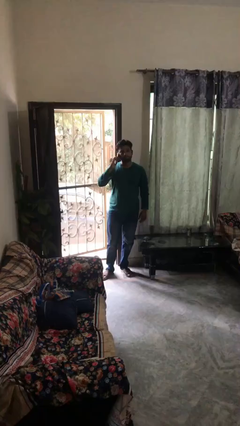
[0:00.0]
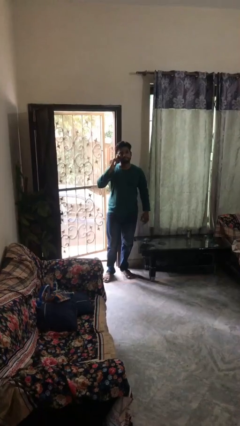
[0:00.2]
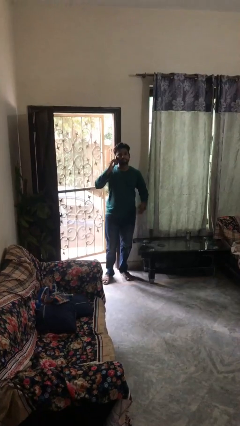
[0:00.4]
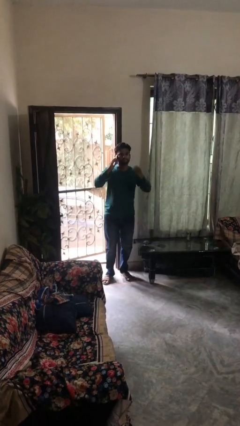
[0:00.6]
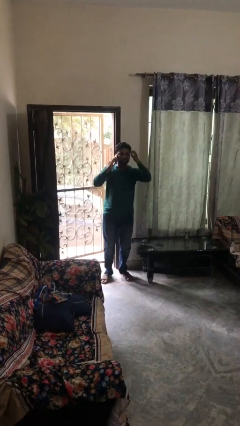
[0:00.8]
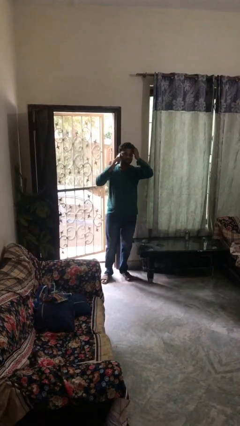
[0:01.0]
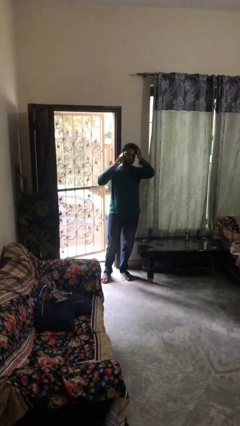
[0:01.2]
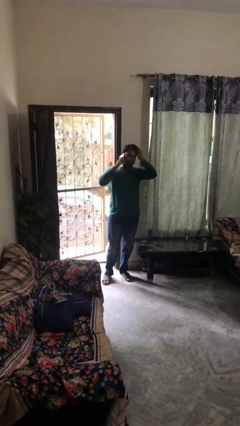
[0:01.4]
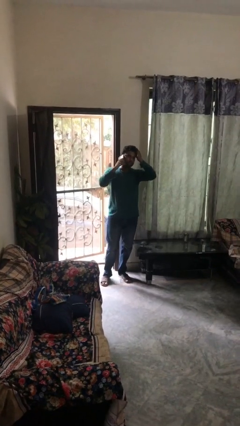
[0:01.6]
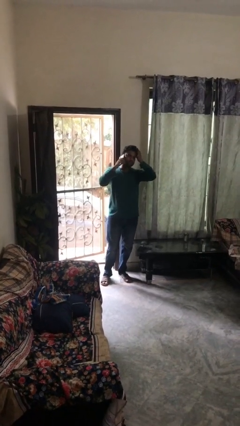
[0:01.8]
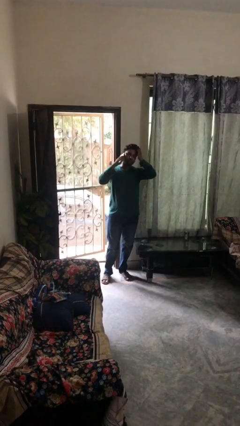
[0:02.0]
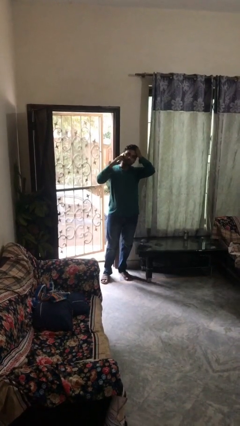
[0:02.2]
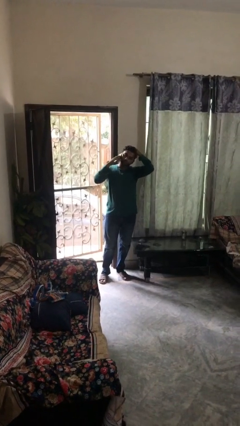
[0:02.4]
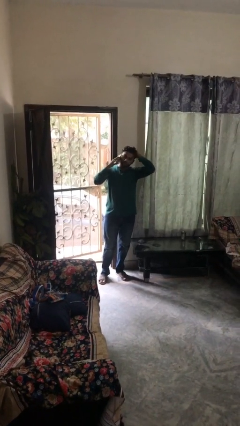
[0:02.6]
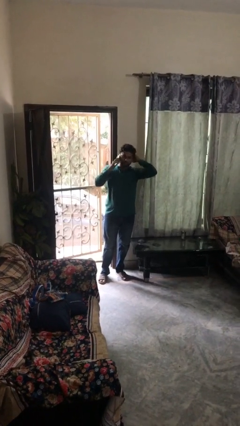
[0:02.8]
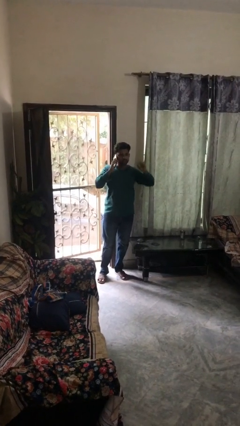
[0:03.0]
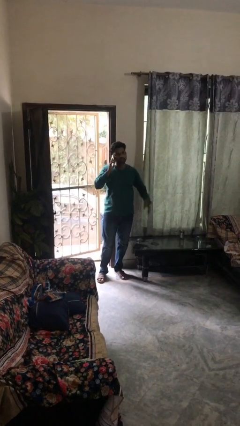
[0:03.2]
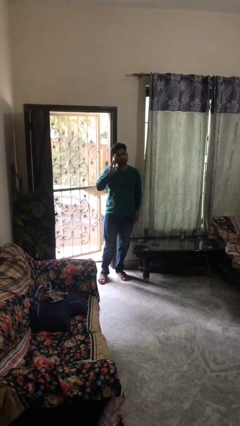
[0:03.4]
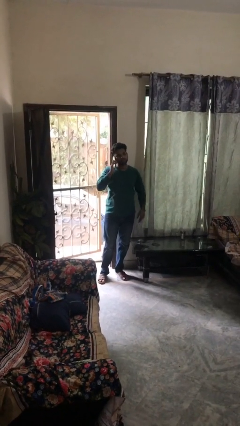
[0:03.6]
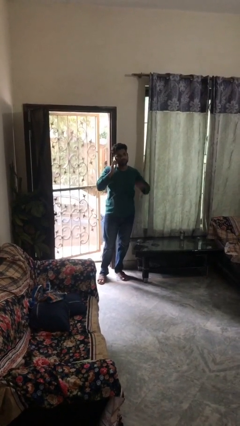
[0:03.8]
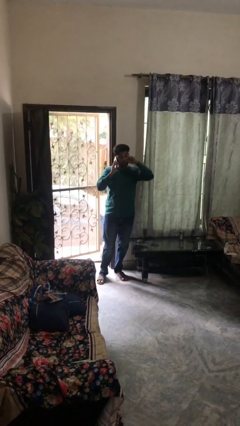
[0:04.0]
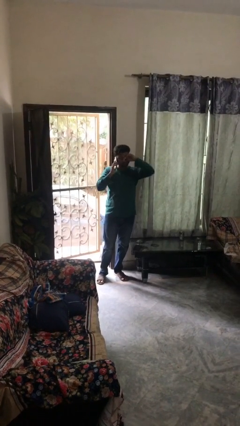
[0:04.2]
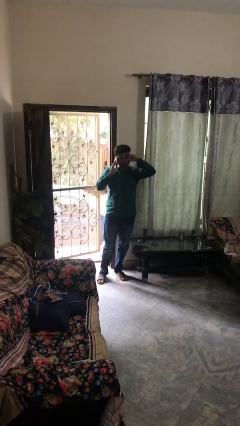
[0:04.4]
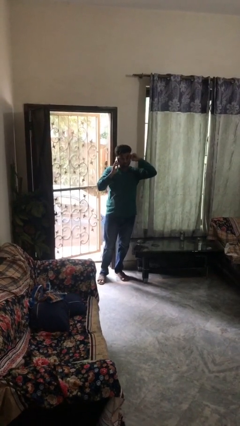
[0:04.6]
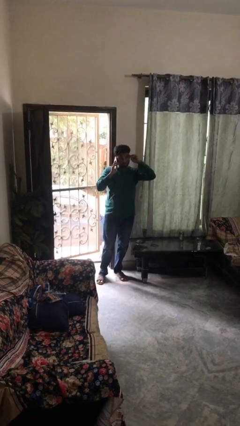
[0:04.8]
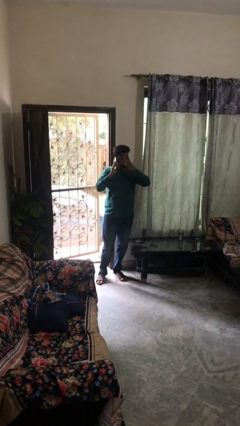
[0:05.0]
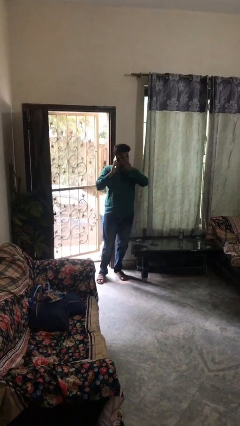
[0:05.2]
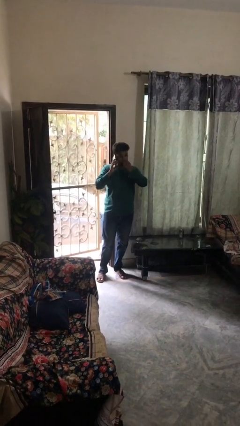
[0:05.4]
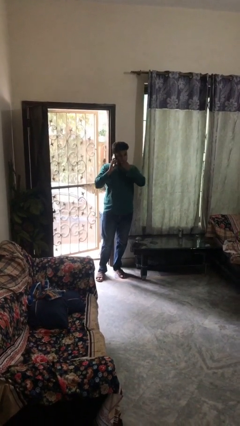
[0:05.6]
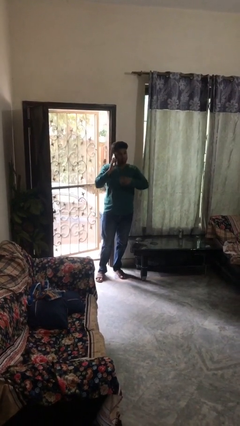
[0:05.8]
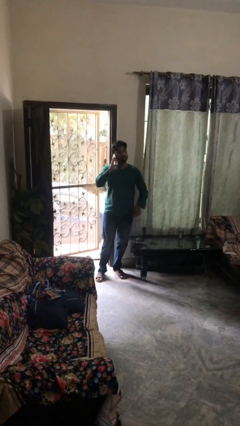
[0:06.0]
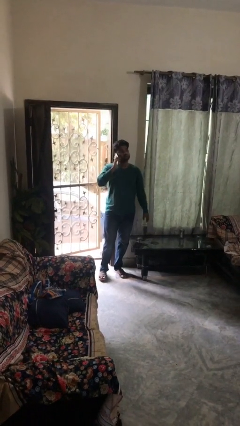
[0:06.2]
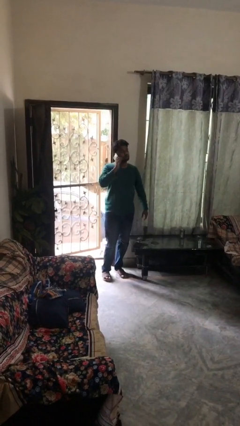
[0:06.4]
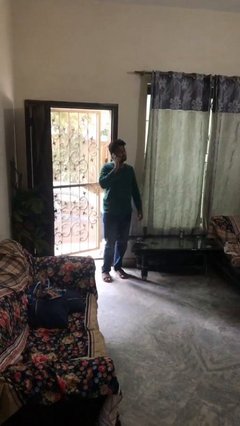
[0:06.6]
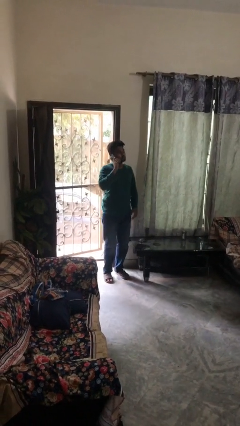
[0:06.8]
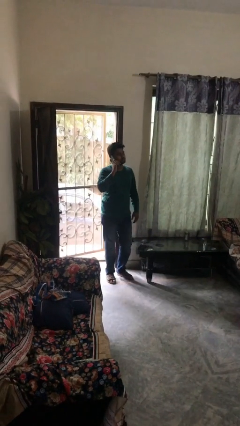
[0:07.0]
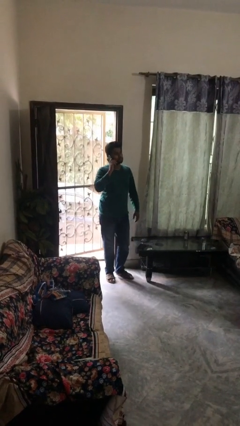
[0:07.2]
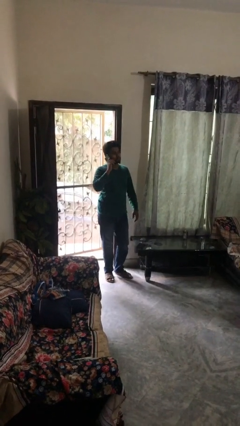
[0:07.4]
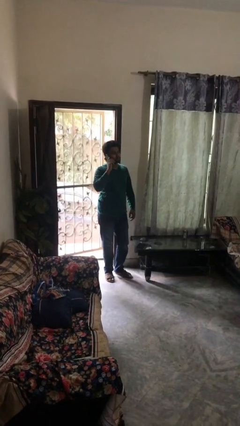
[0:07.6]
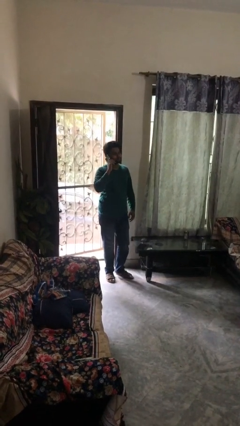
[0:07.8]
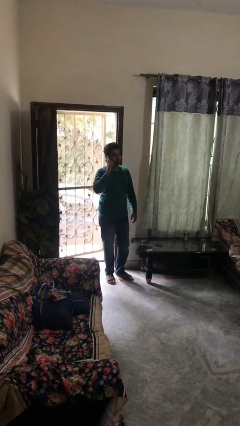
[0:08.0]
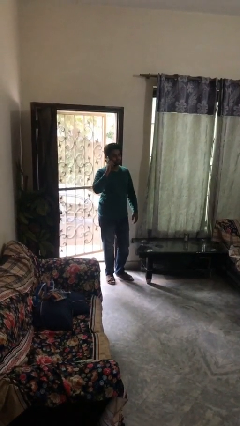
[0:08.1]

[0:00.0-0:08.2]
person talks on phone

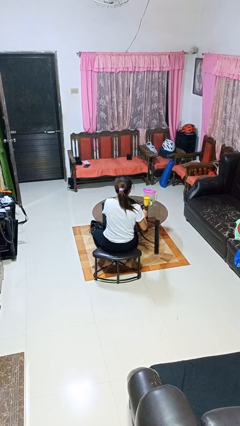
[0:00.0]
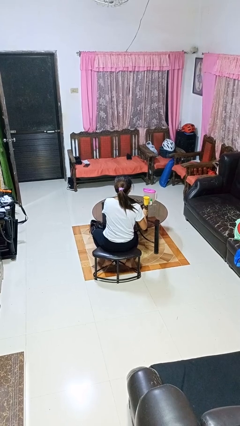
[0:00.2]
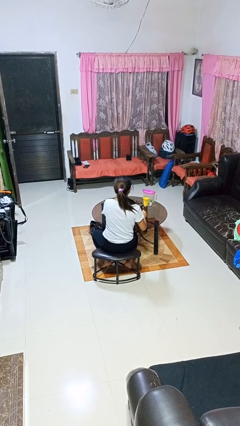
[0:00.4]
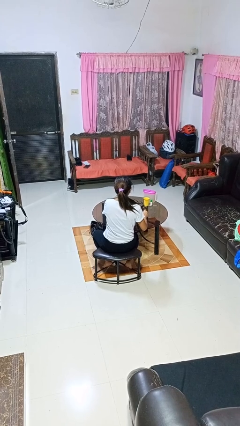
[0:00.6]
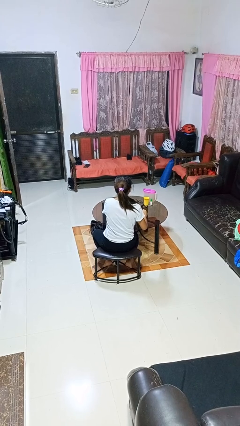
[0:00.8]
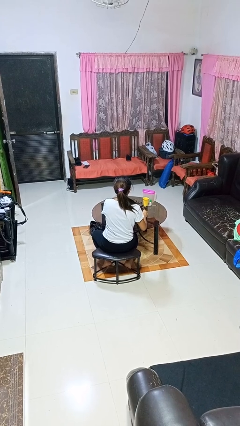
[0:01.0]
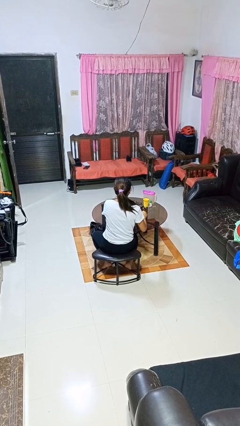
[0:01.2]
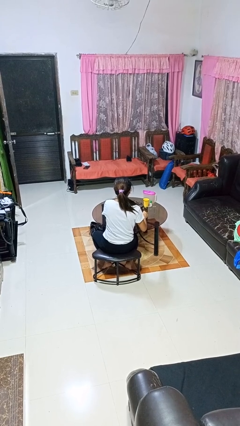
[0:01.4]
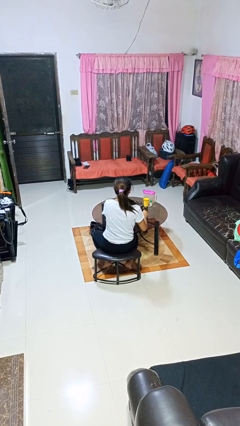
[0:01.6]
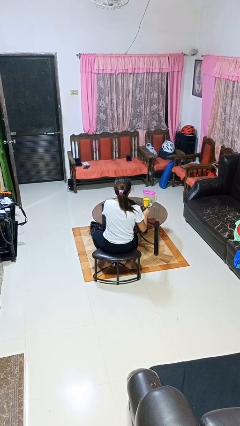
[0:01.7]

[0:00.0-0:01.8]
person stirs mug

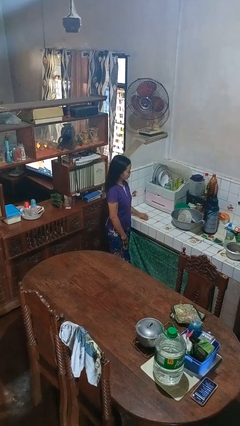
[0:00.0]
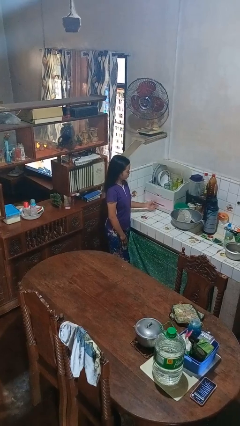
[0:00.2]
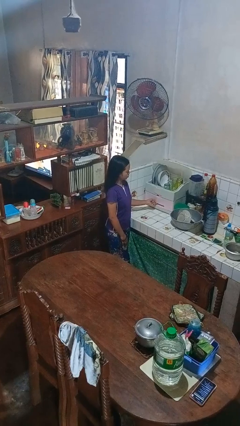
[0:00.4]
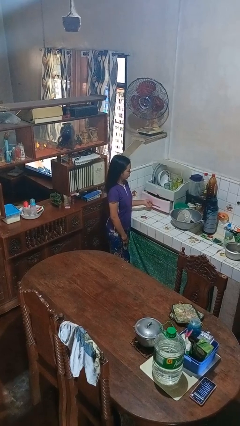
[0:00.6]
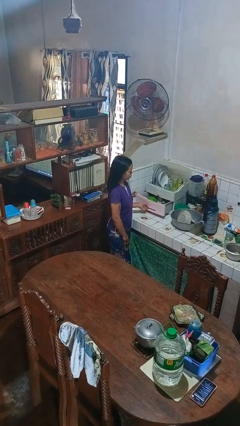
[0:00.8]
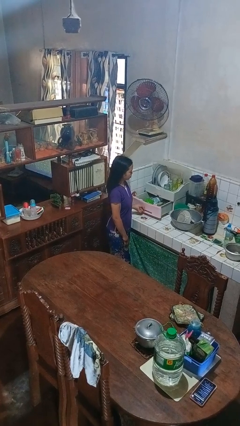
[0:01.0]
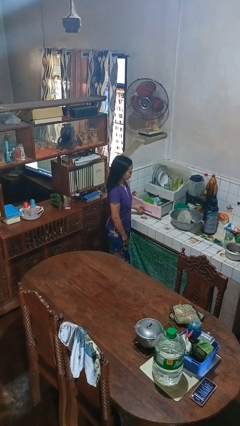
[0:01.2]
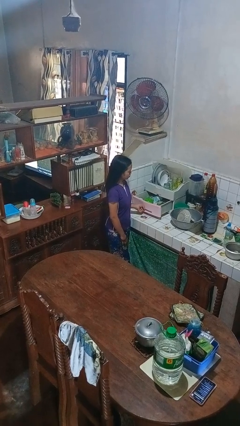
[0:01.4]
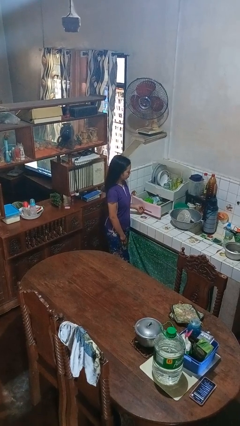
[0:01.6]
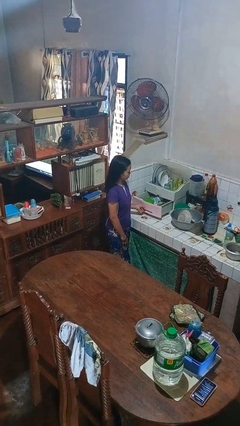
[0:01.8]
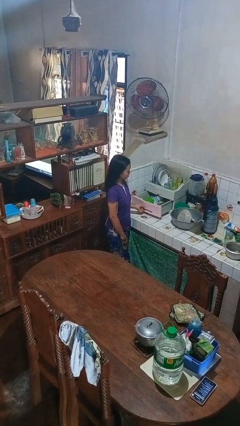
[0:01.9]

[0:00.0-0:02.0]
person opens kitchen drawer

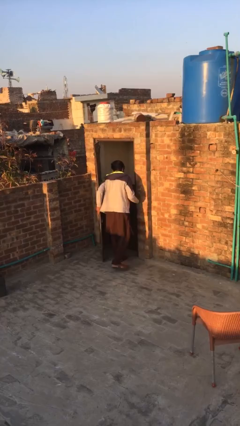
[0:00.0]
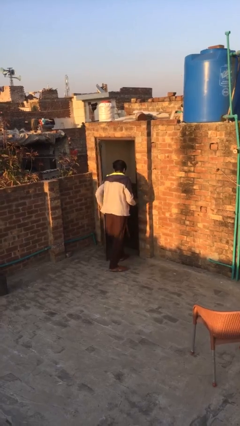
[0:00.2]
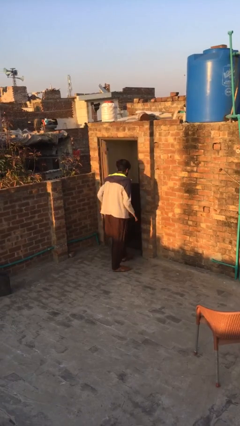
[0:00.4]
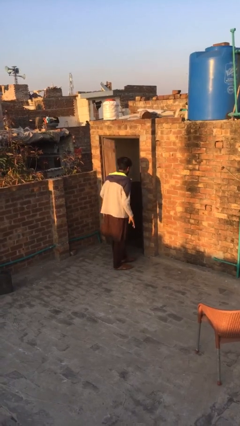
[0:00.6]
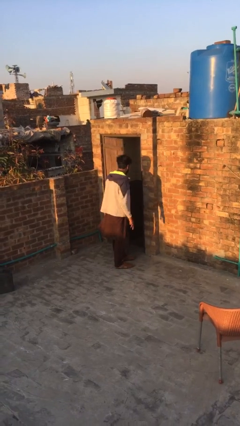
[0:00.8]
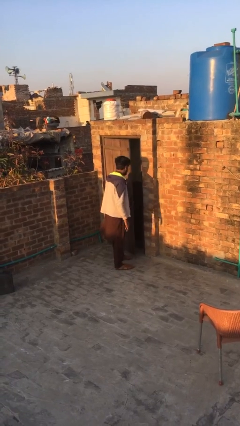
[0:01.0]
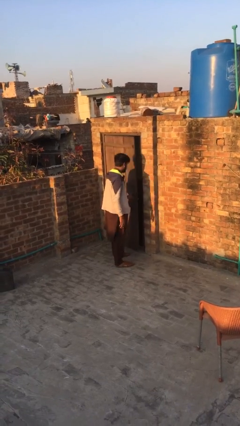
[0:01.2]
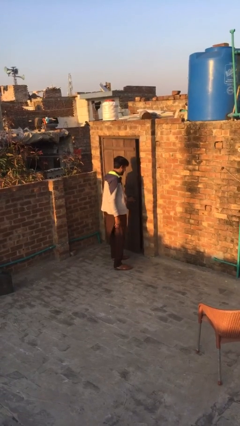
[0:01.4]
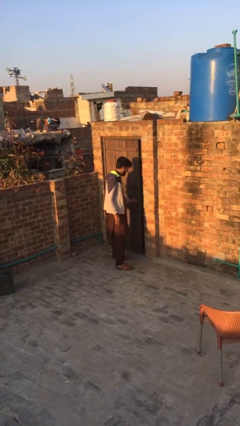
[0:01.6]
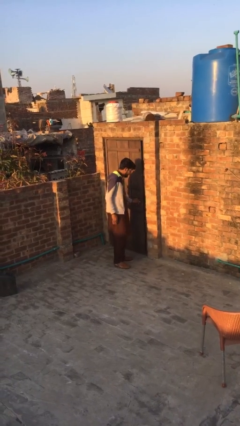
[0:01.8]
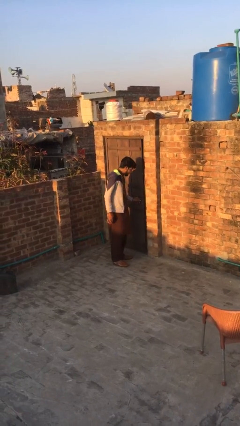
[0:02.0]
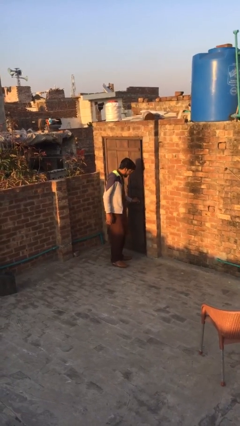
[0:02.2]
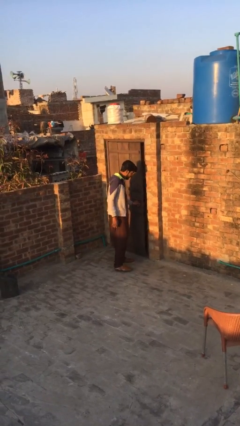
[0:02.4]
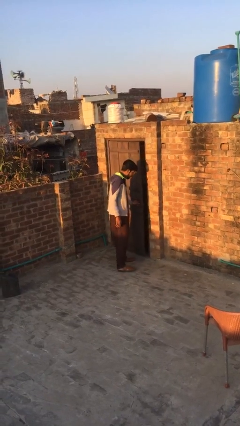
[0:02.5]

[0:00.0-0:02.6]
person closes facility door

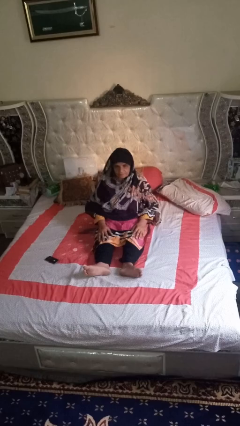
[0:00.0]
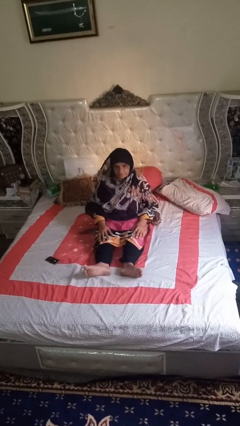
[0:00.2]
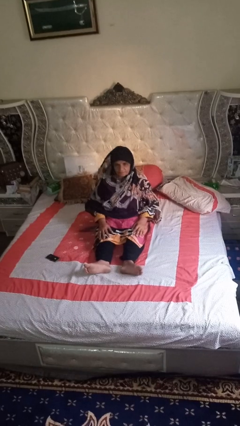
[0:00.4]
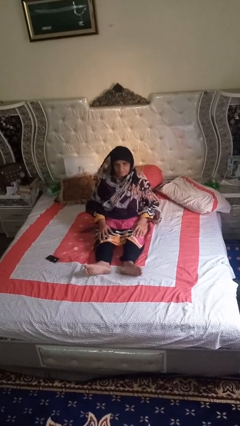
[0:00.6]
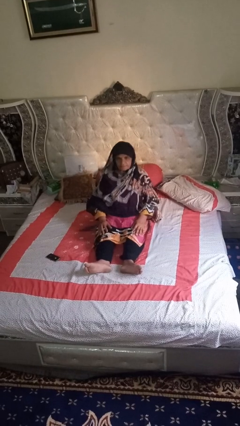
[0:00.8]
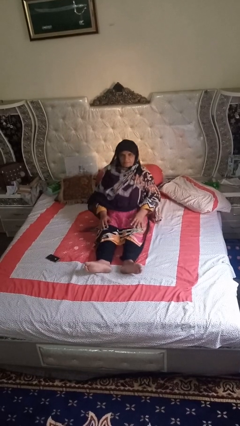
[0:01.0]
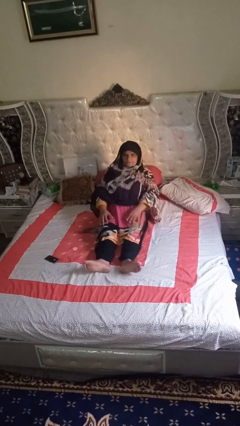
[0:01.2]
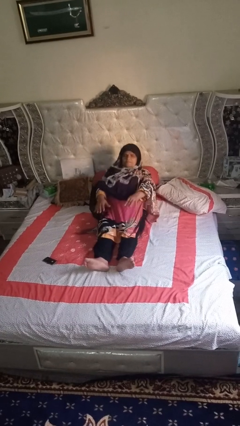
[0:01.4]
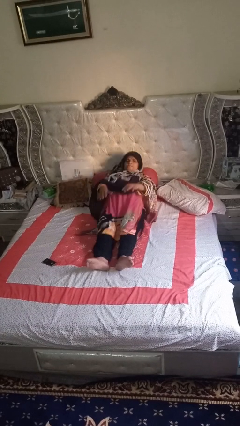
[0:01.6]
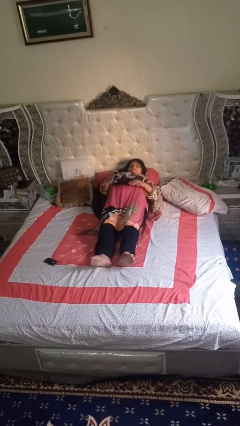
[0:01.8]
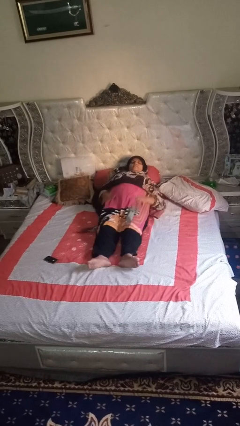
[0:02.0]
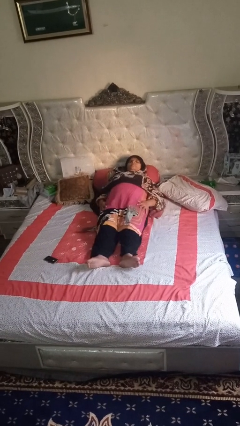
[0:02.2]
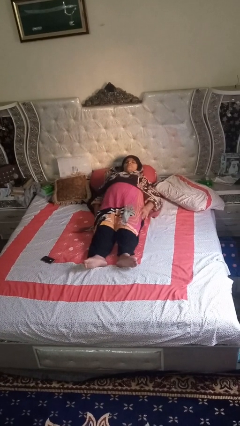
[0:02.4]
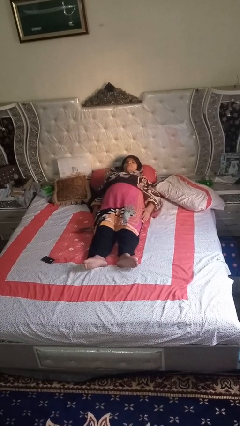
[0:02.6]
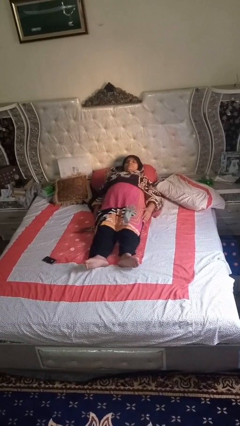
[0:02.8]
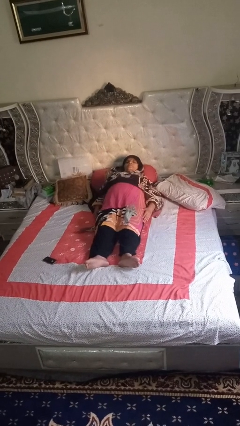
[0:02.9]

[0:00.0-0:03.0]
person lies down on bed

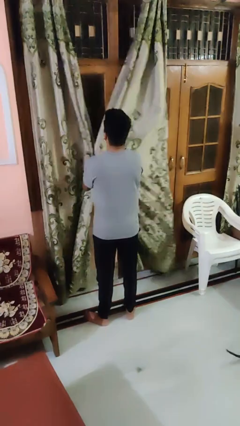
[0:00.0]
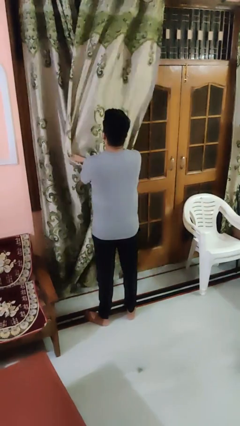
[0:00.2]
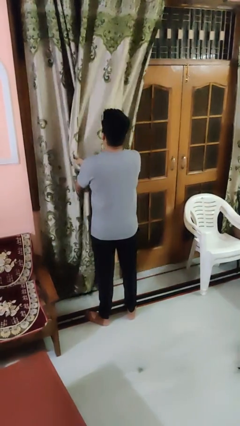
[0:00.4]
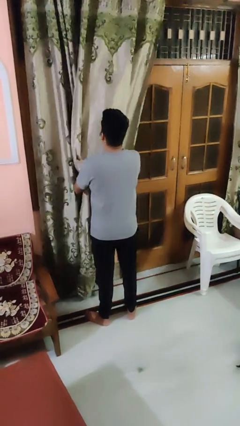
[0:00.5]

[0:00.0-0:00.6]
person closes curtains
